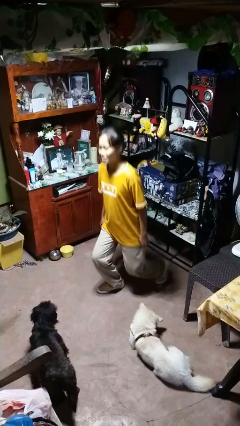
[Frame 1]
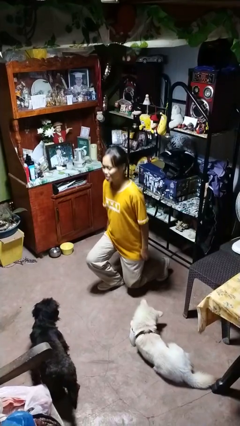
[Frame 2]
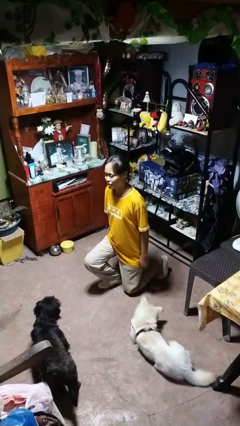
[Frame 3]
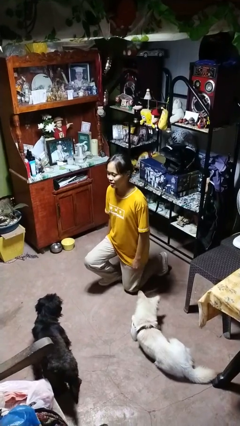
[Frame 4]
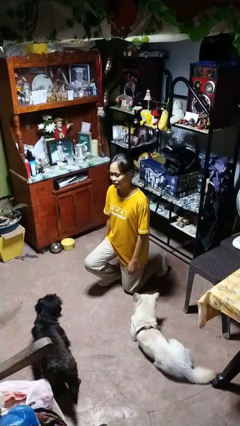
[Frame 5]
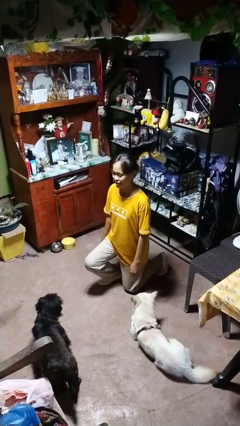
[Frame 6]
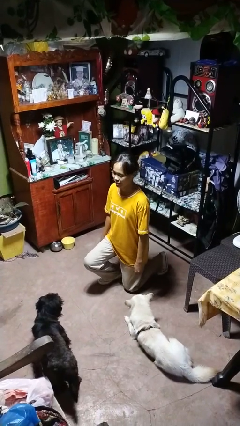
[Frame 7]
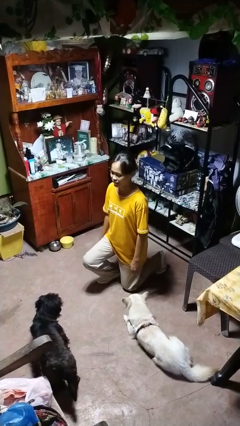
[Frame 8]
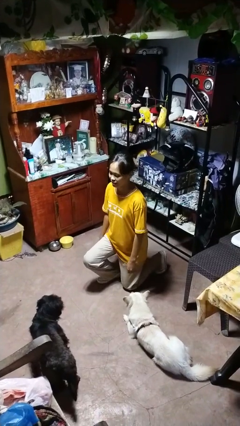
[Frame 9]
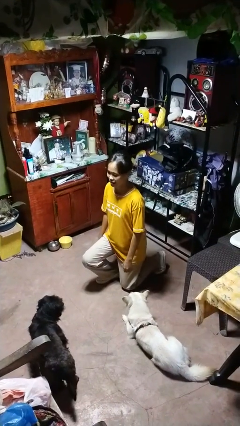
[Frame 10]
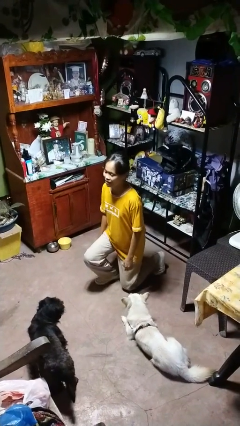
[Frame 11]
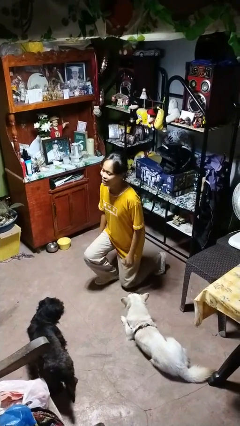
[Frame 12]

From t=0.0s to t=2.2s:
person kneels

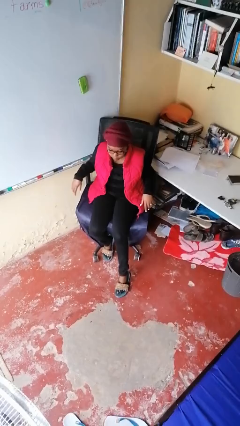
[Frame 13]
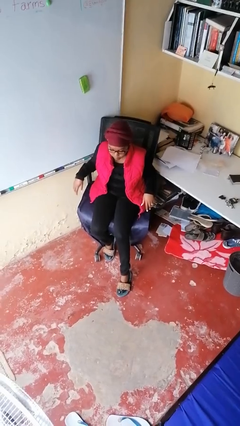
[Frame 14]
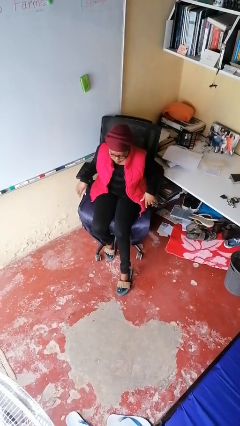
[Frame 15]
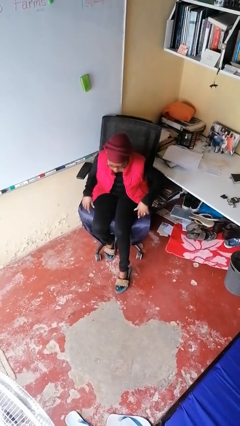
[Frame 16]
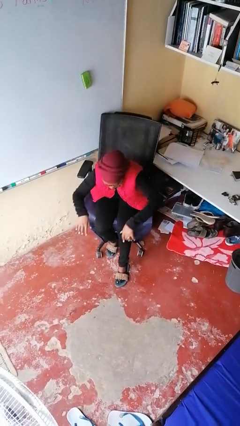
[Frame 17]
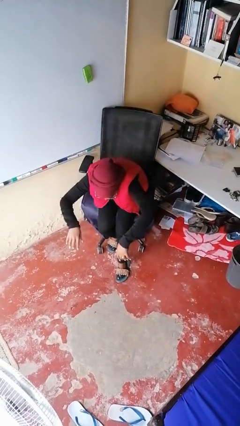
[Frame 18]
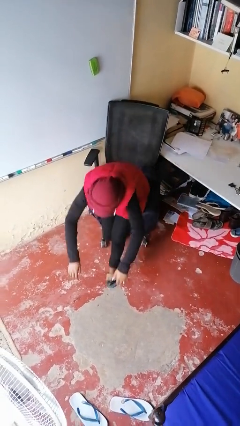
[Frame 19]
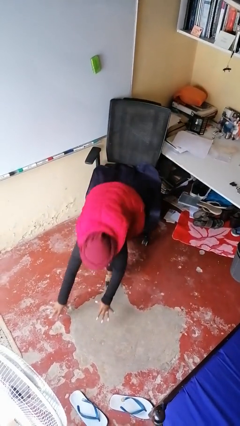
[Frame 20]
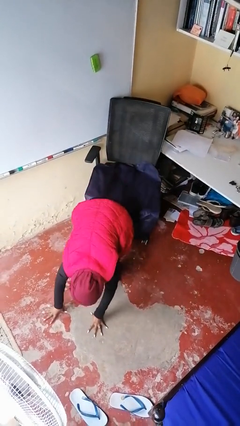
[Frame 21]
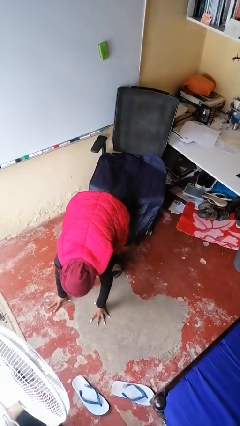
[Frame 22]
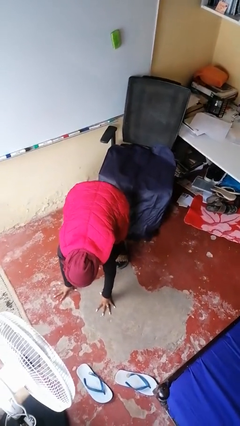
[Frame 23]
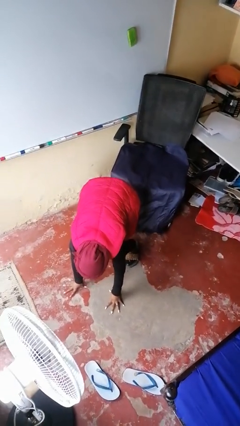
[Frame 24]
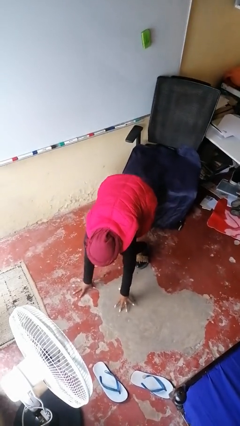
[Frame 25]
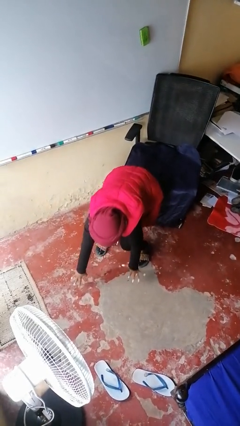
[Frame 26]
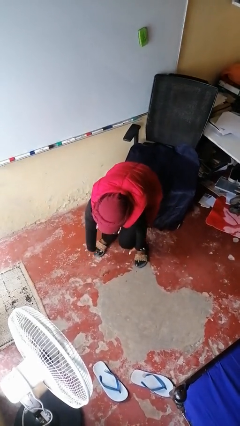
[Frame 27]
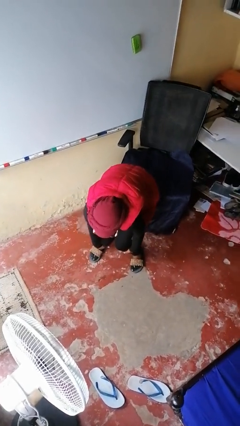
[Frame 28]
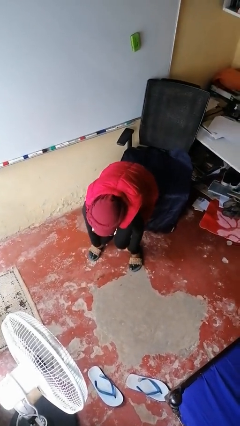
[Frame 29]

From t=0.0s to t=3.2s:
person falls from chair

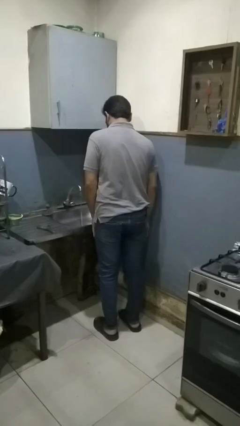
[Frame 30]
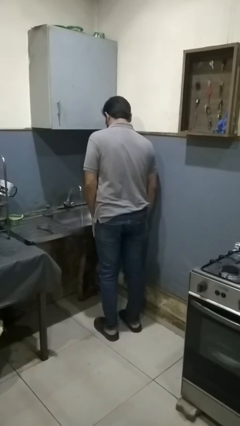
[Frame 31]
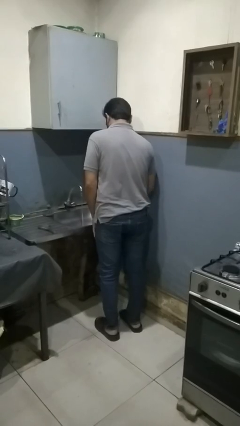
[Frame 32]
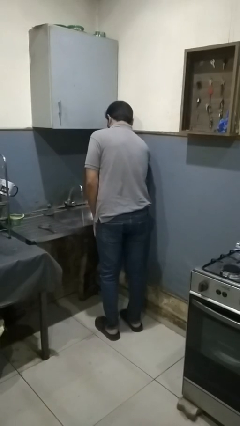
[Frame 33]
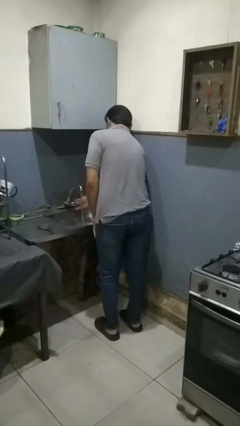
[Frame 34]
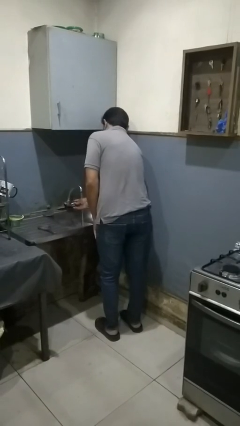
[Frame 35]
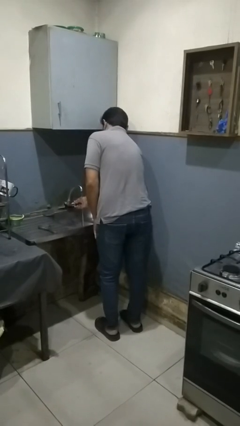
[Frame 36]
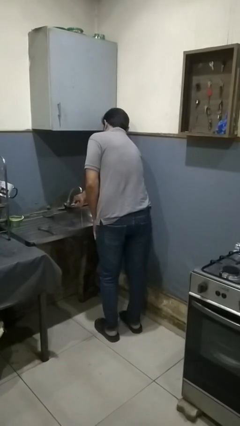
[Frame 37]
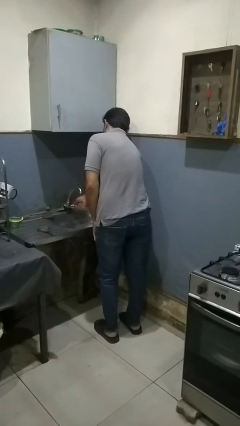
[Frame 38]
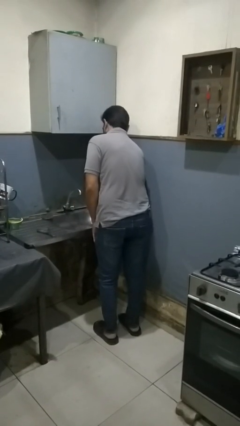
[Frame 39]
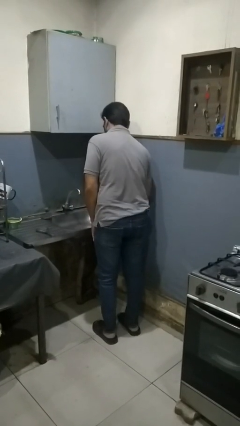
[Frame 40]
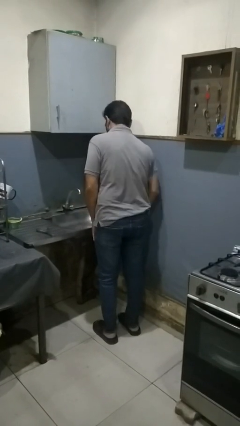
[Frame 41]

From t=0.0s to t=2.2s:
person turns off faucet

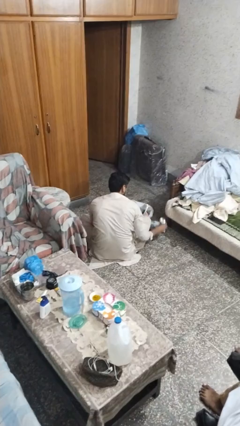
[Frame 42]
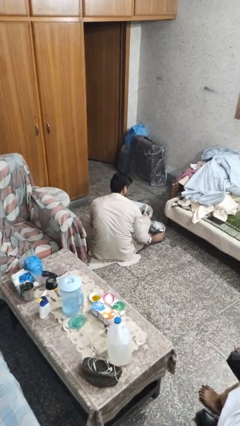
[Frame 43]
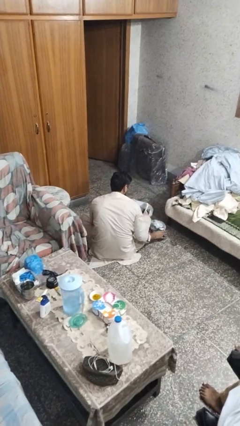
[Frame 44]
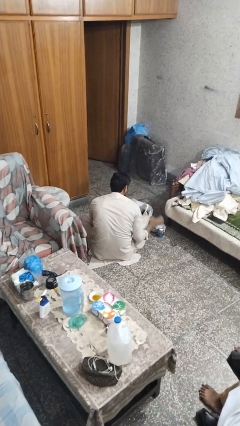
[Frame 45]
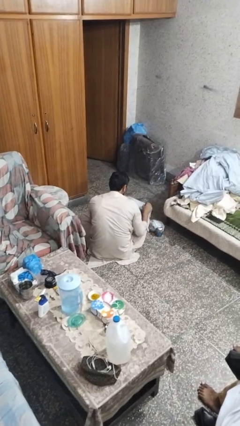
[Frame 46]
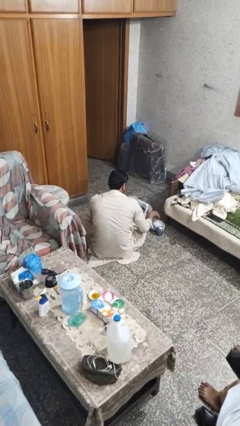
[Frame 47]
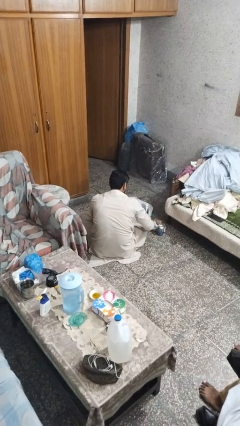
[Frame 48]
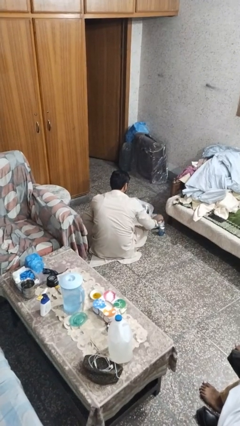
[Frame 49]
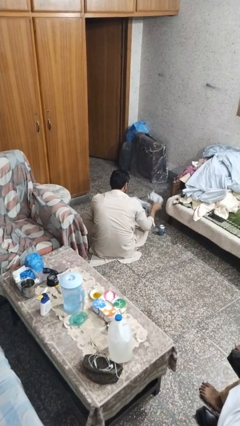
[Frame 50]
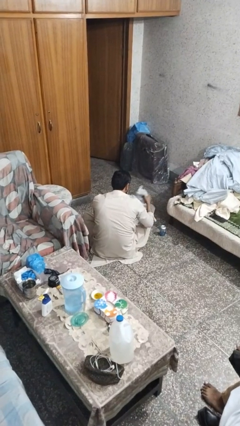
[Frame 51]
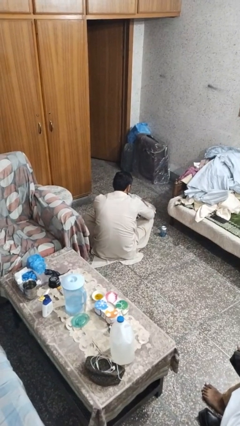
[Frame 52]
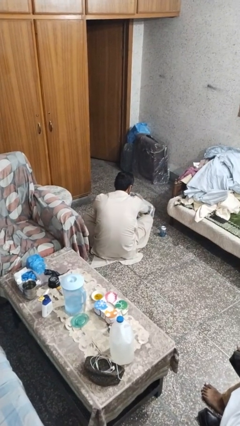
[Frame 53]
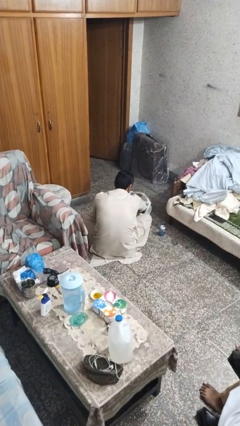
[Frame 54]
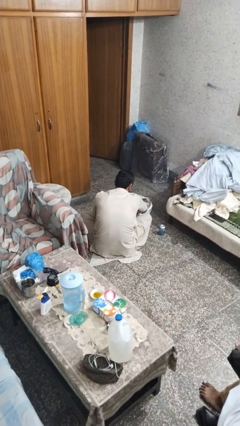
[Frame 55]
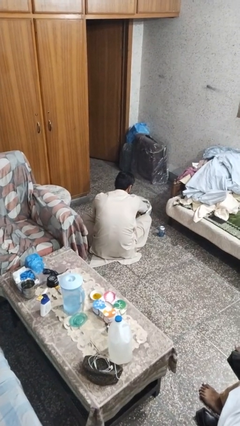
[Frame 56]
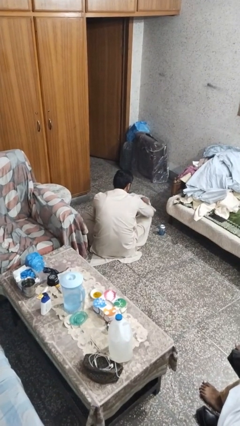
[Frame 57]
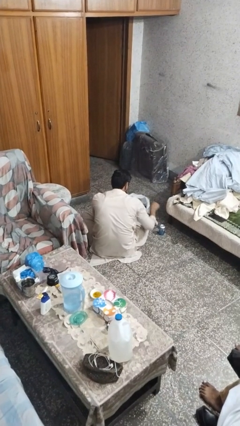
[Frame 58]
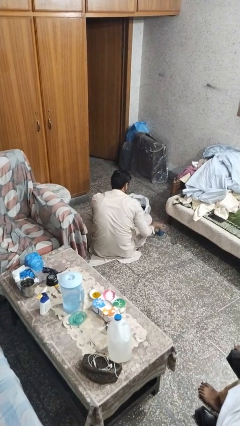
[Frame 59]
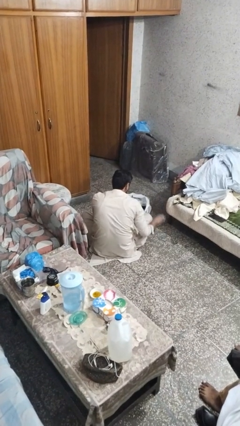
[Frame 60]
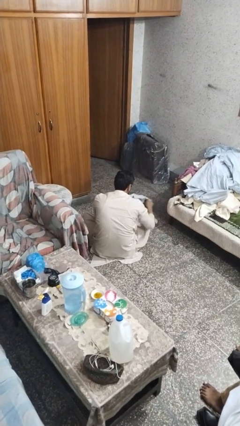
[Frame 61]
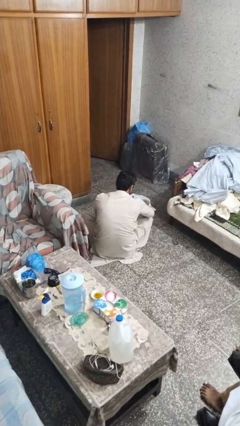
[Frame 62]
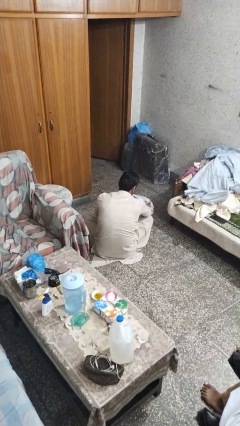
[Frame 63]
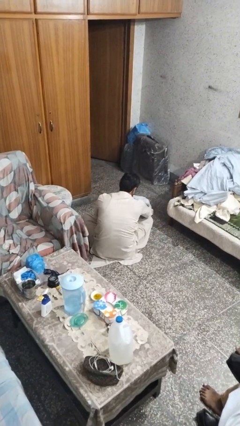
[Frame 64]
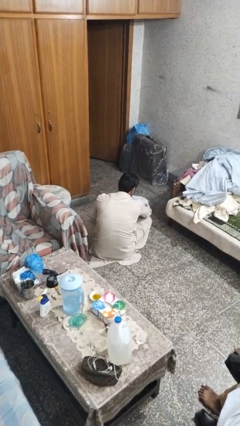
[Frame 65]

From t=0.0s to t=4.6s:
person puts object into bag

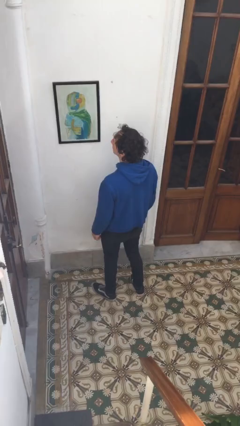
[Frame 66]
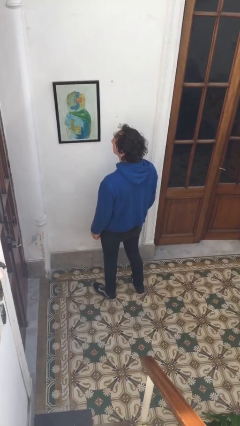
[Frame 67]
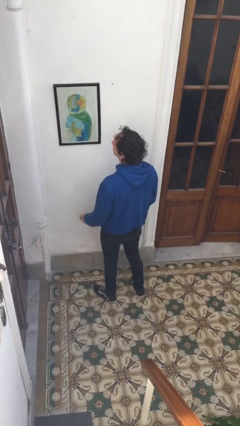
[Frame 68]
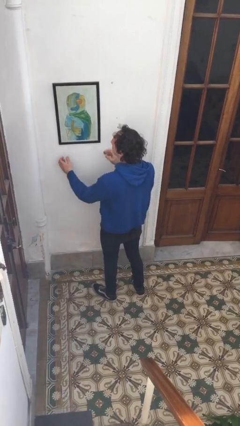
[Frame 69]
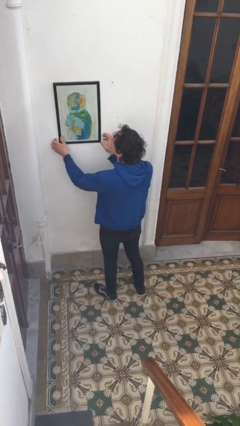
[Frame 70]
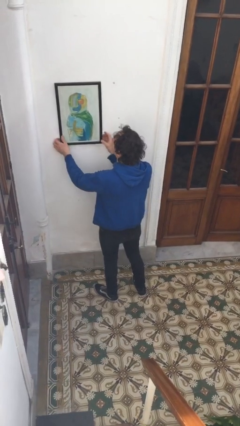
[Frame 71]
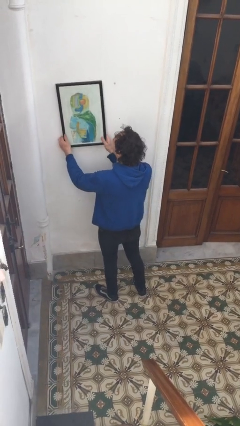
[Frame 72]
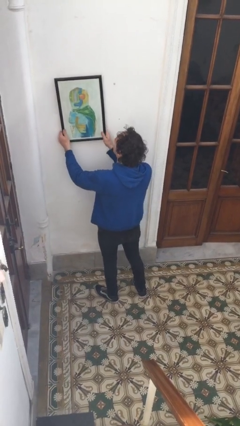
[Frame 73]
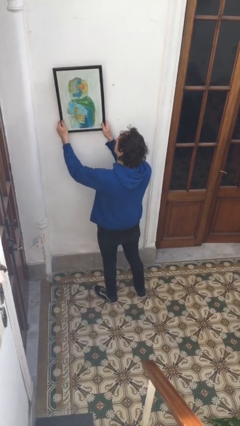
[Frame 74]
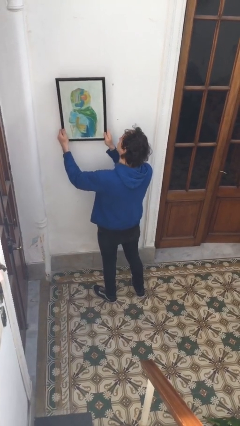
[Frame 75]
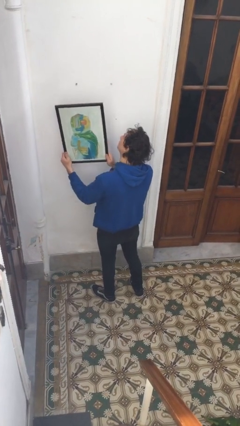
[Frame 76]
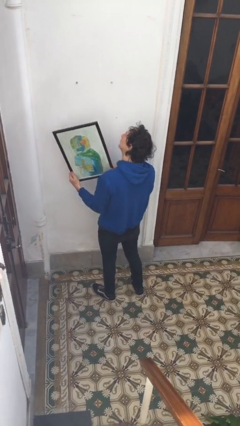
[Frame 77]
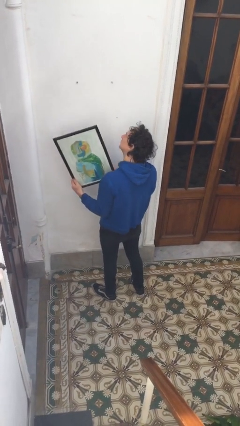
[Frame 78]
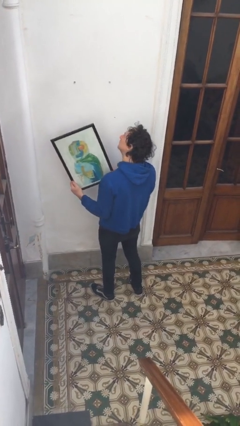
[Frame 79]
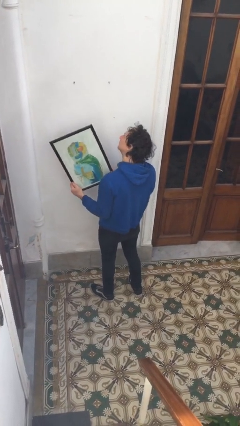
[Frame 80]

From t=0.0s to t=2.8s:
person takes down picture frame

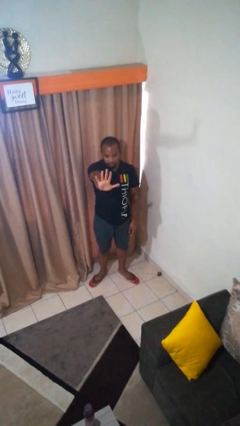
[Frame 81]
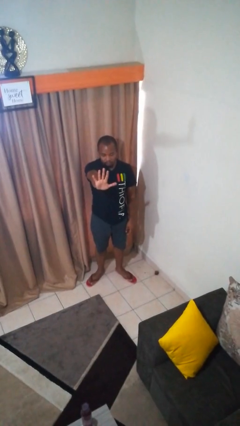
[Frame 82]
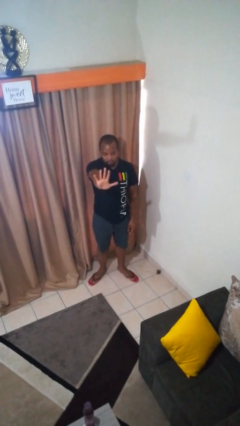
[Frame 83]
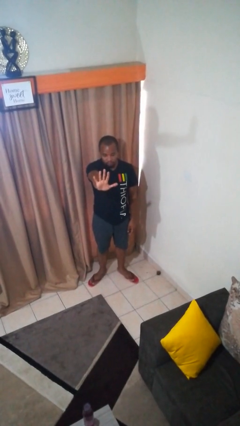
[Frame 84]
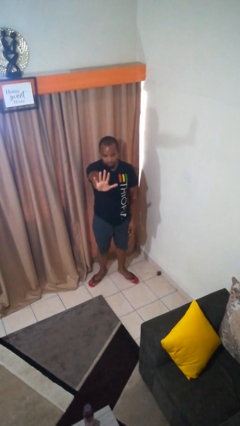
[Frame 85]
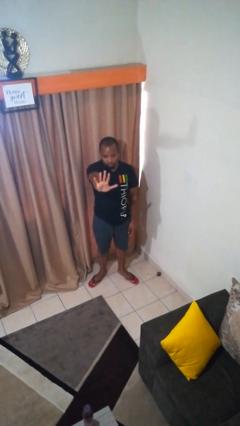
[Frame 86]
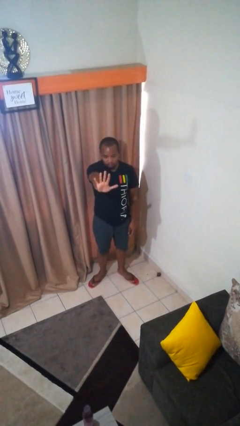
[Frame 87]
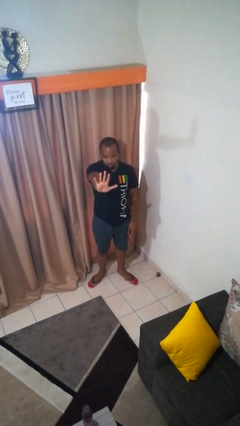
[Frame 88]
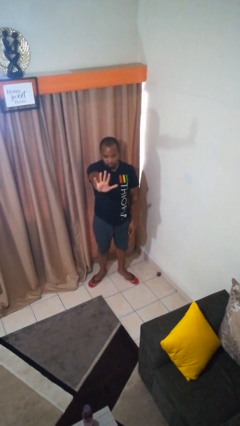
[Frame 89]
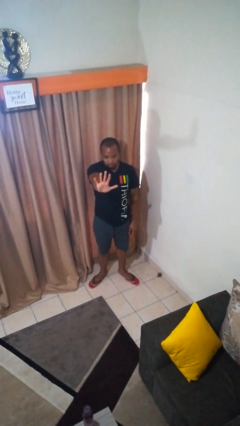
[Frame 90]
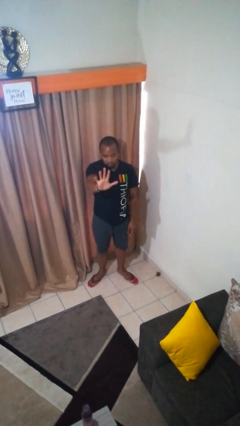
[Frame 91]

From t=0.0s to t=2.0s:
person gestures number five

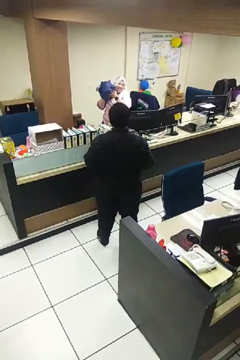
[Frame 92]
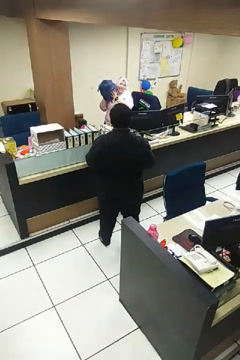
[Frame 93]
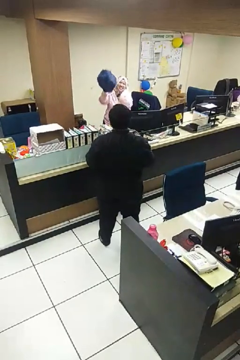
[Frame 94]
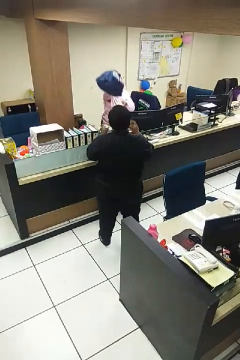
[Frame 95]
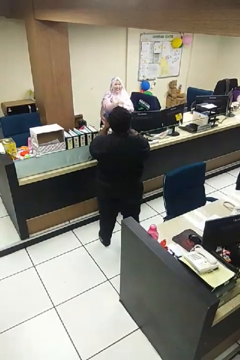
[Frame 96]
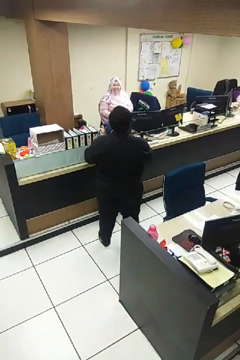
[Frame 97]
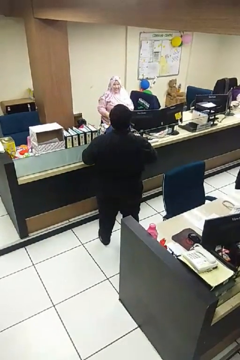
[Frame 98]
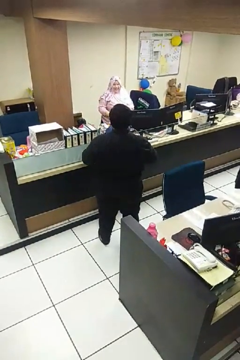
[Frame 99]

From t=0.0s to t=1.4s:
person catches object from person
